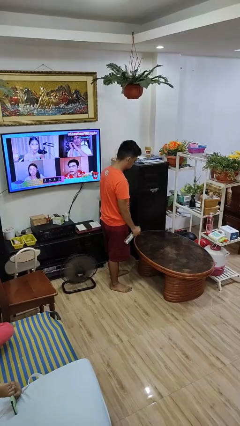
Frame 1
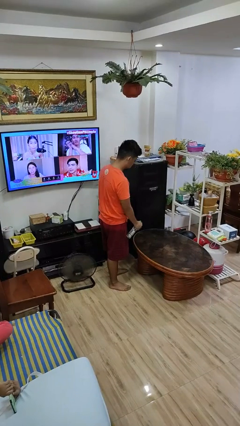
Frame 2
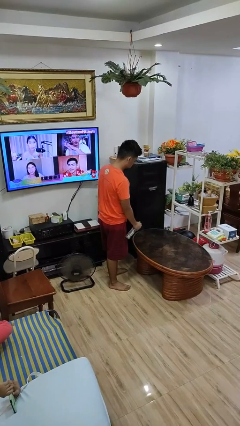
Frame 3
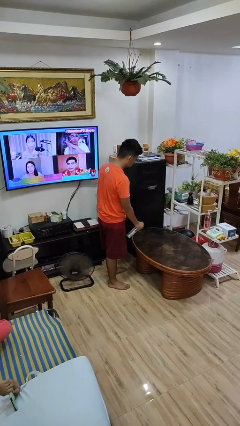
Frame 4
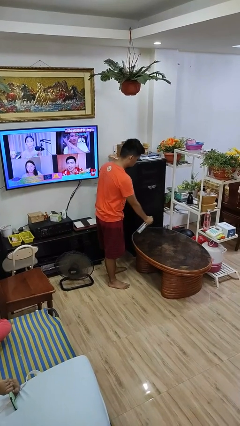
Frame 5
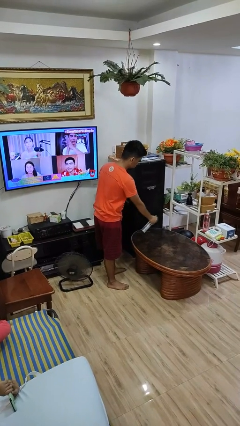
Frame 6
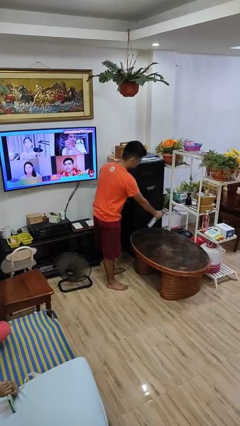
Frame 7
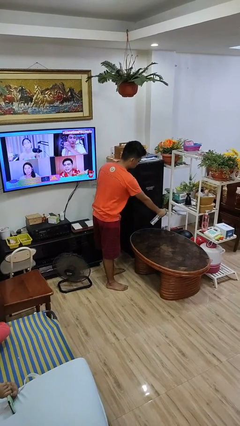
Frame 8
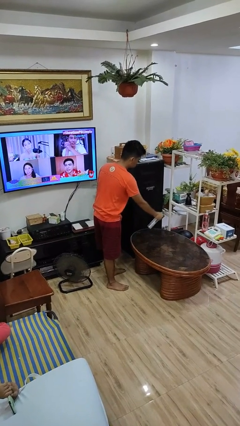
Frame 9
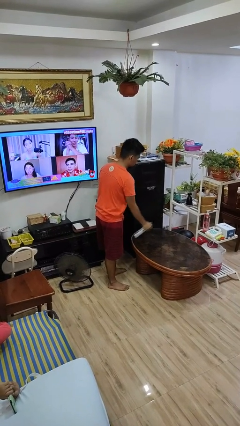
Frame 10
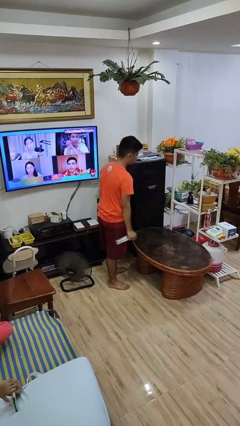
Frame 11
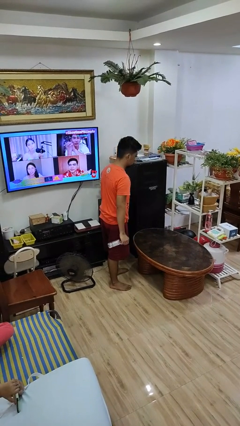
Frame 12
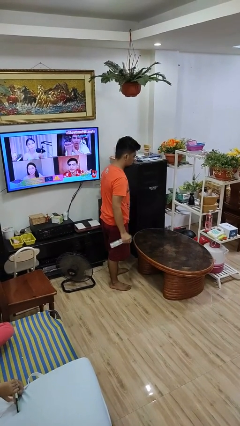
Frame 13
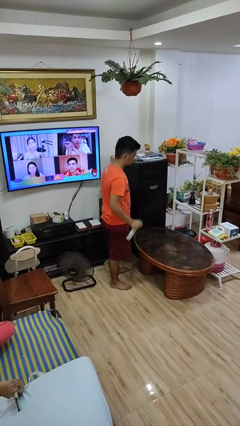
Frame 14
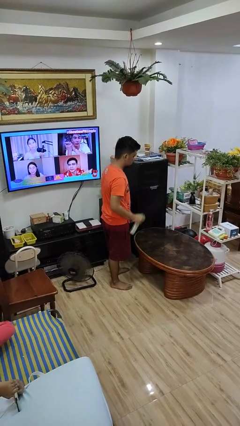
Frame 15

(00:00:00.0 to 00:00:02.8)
person sprays from bottle

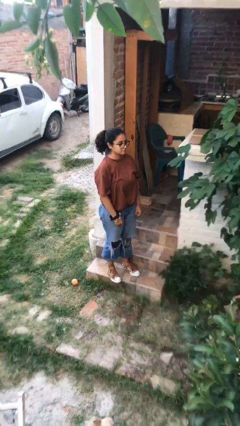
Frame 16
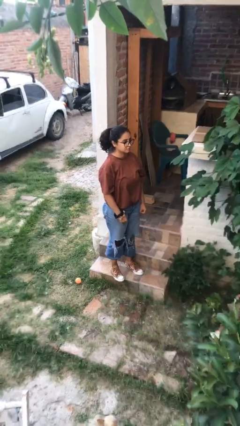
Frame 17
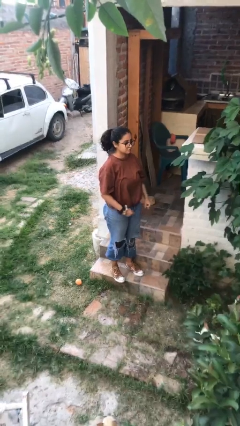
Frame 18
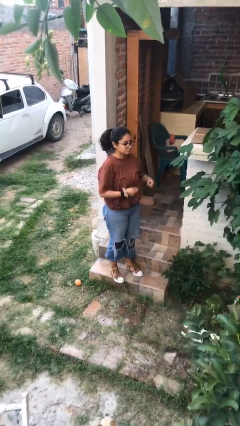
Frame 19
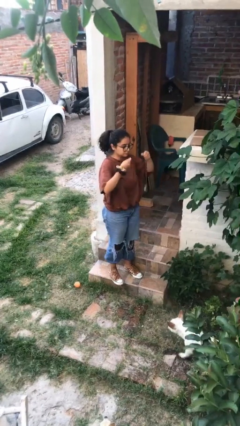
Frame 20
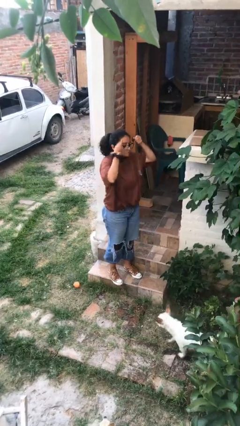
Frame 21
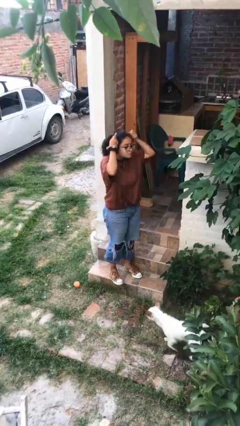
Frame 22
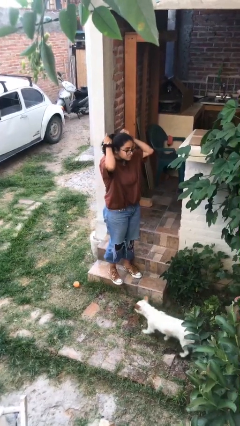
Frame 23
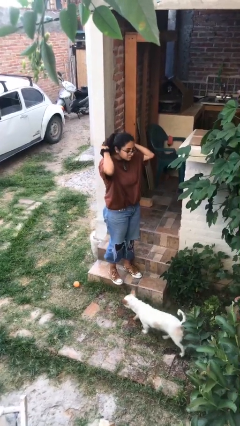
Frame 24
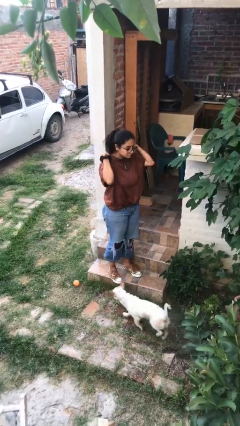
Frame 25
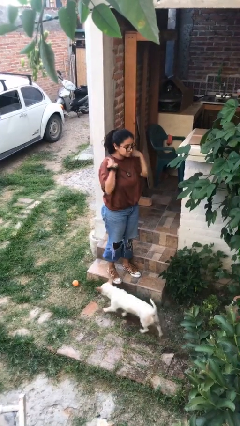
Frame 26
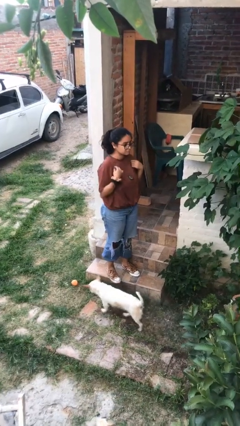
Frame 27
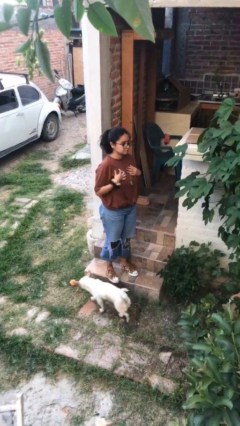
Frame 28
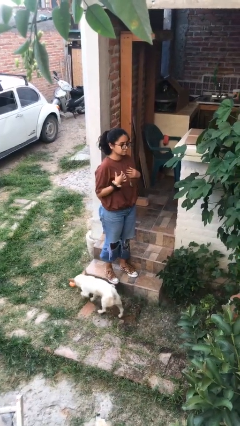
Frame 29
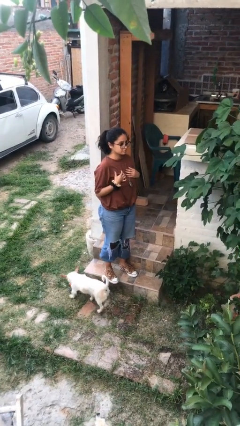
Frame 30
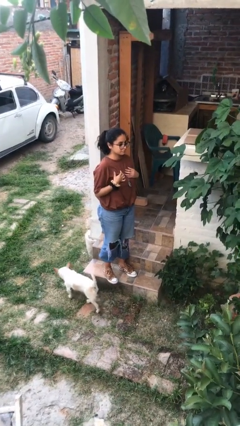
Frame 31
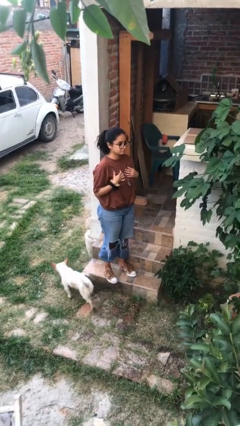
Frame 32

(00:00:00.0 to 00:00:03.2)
person puts on necklace

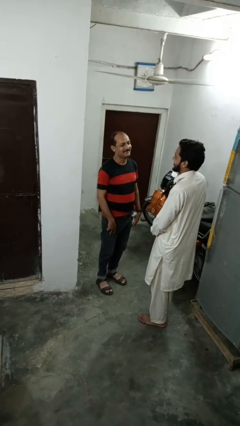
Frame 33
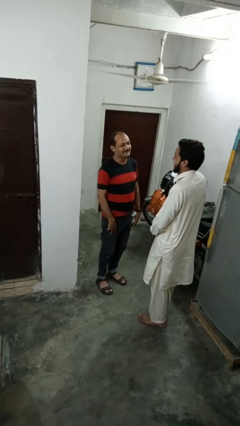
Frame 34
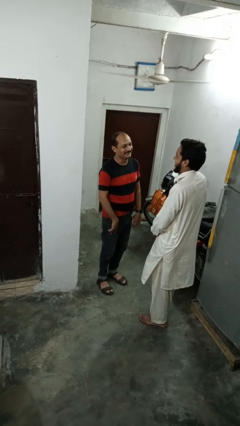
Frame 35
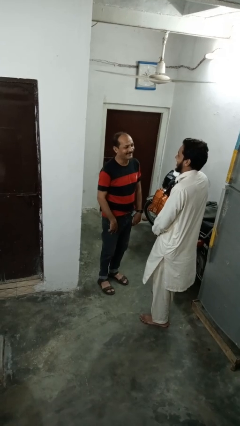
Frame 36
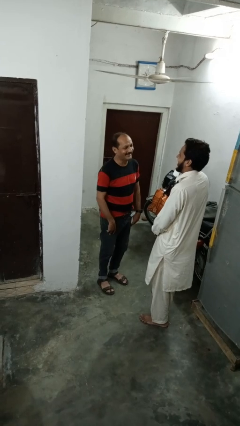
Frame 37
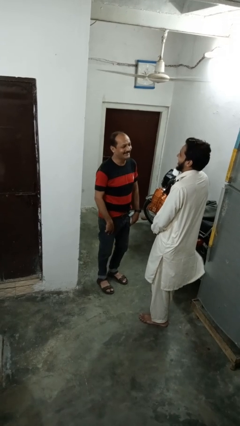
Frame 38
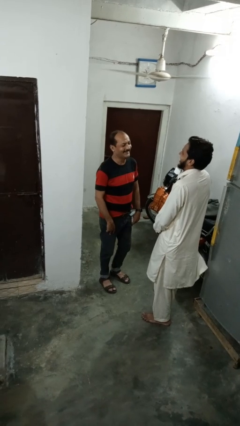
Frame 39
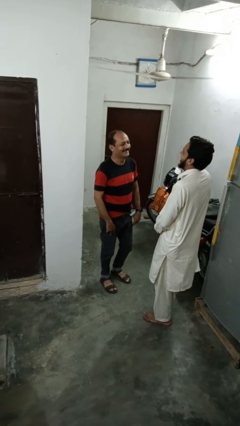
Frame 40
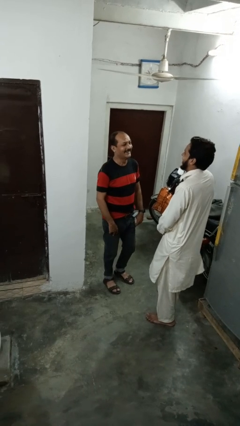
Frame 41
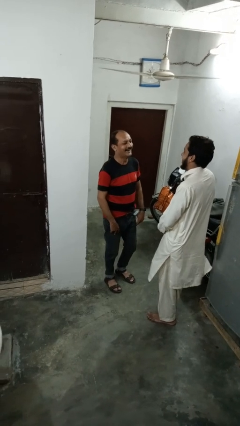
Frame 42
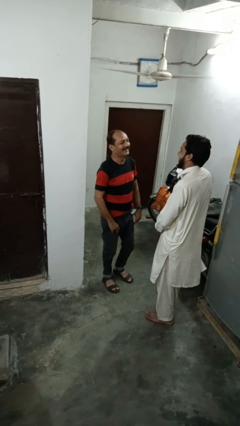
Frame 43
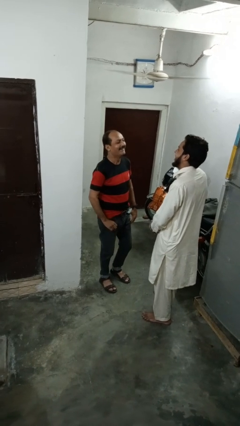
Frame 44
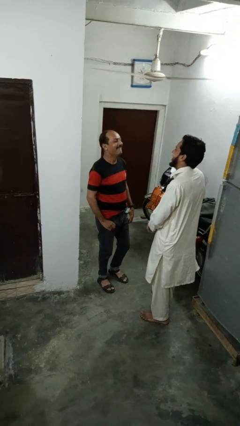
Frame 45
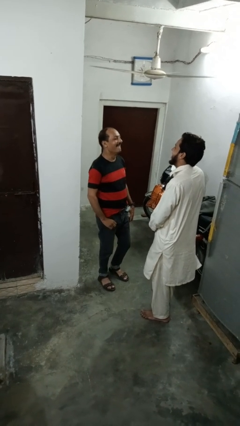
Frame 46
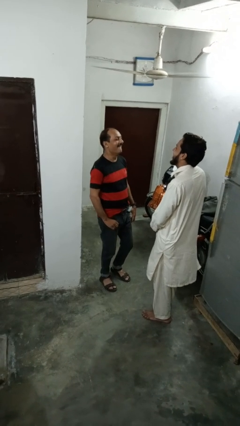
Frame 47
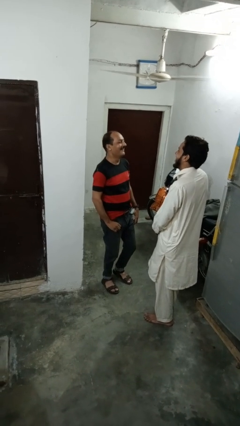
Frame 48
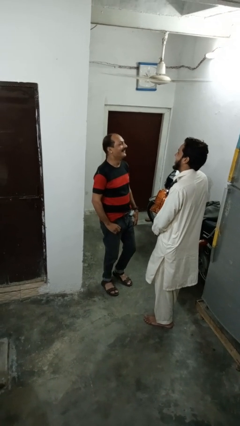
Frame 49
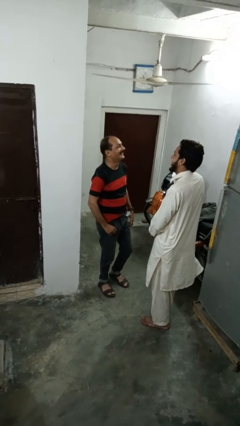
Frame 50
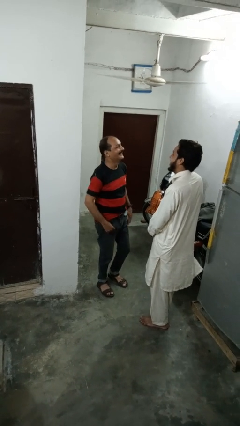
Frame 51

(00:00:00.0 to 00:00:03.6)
person laughs with person

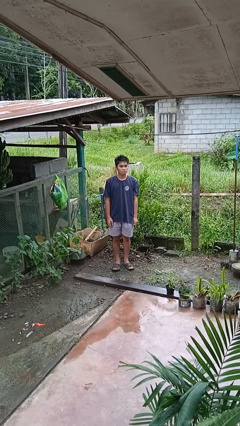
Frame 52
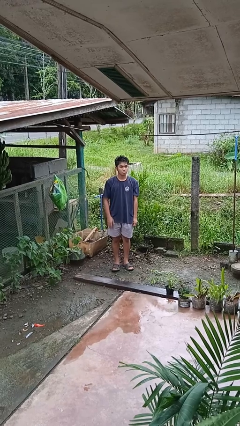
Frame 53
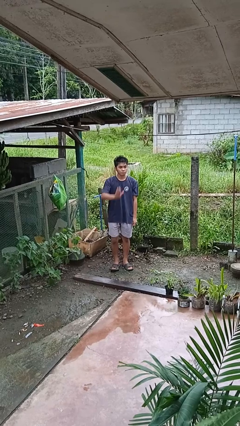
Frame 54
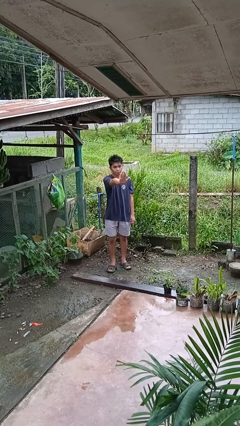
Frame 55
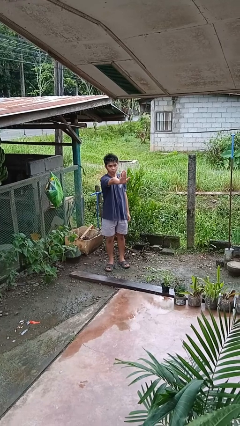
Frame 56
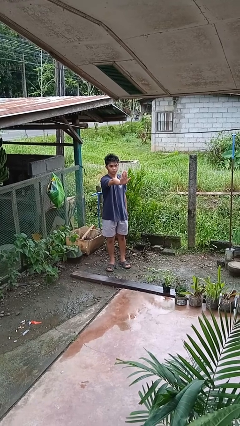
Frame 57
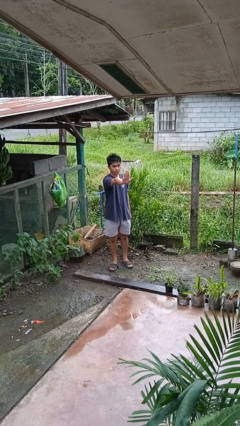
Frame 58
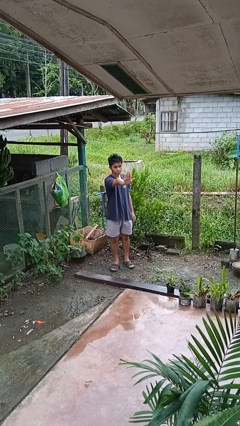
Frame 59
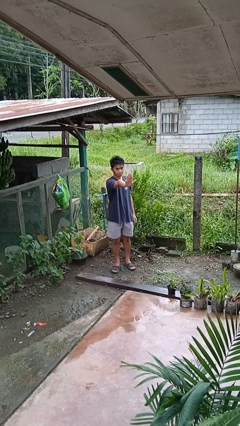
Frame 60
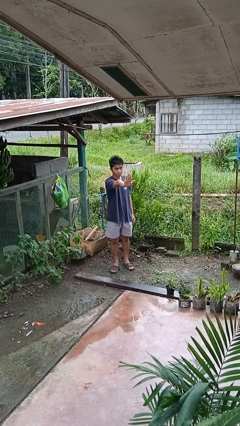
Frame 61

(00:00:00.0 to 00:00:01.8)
person gestures stop

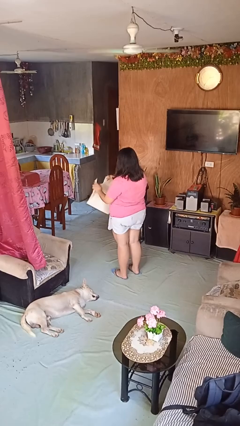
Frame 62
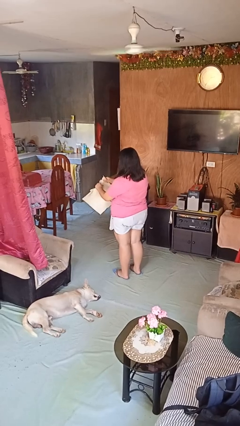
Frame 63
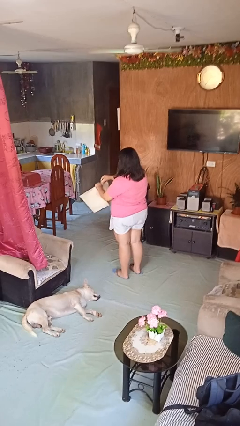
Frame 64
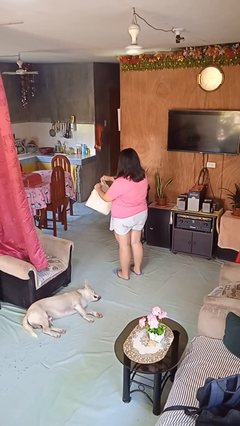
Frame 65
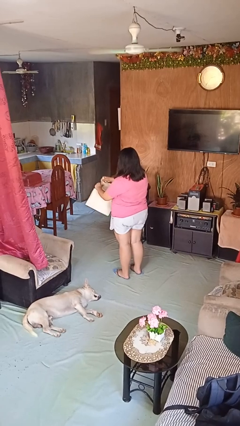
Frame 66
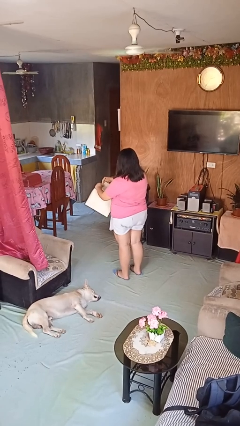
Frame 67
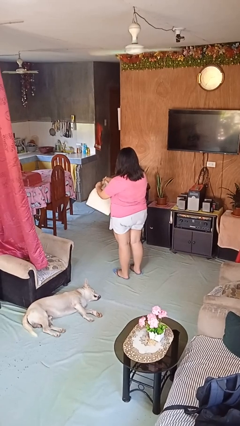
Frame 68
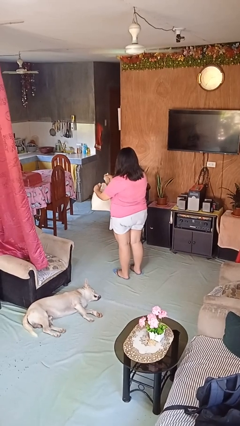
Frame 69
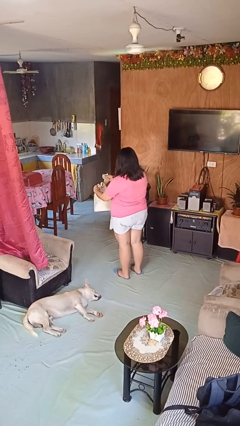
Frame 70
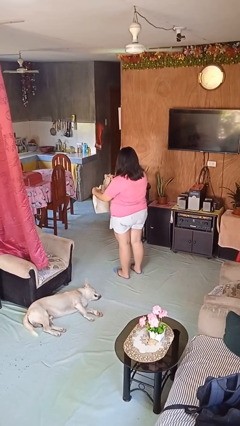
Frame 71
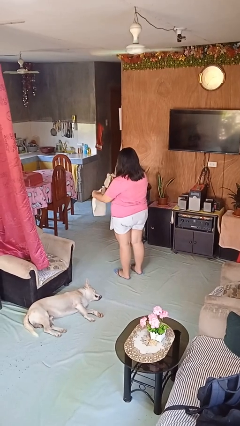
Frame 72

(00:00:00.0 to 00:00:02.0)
person tears paper

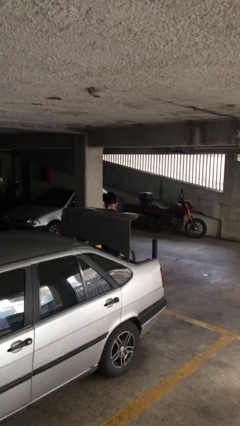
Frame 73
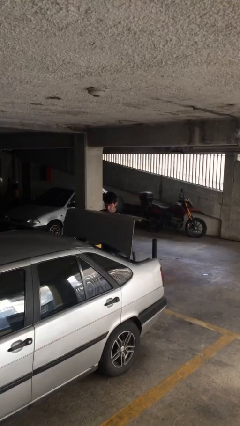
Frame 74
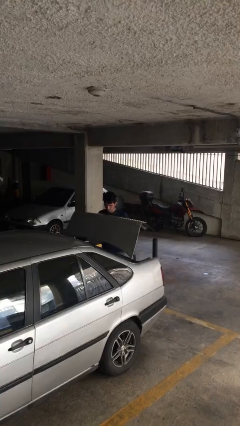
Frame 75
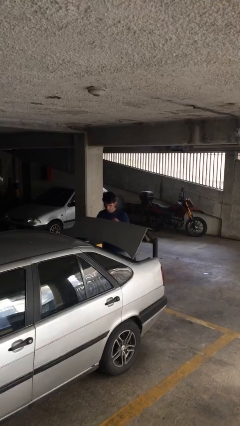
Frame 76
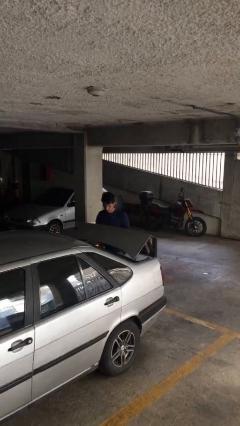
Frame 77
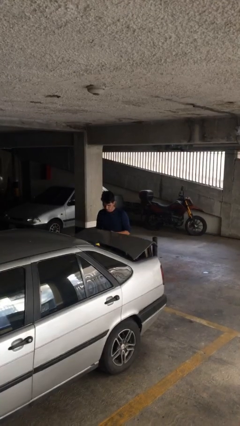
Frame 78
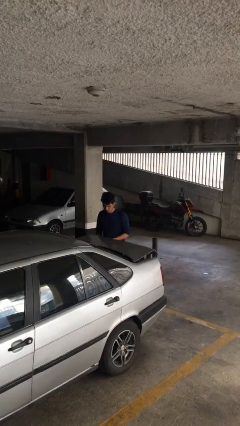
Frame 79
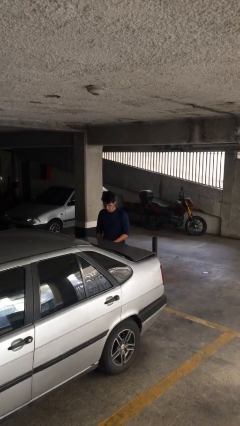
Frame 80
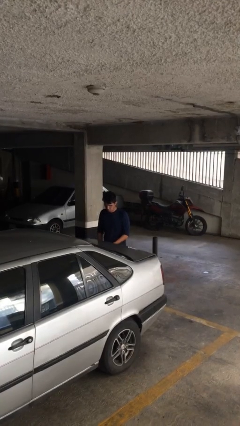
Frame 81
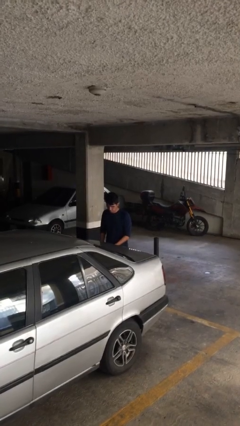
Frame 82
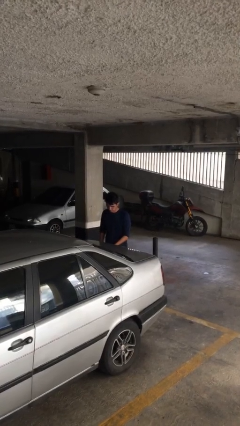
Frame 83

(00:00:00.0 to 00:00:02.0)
person closes car trunk

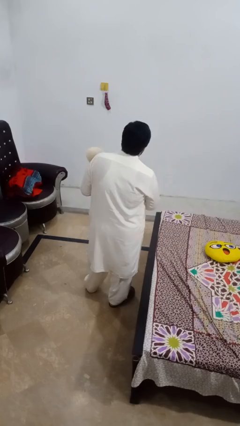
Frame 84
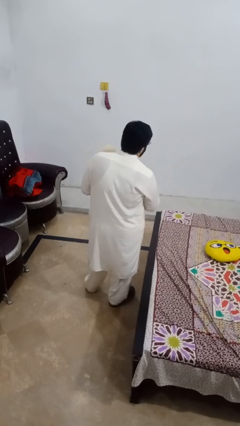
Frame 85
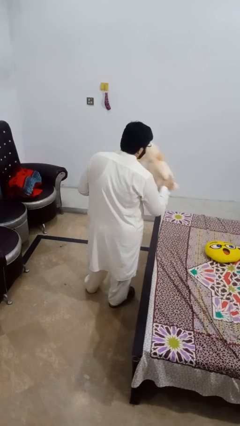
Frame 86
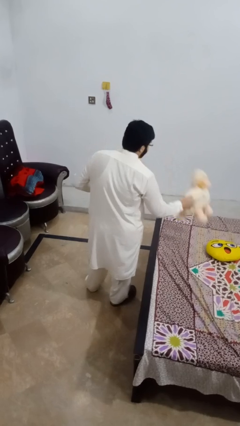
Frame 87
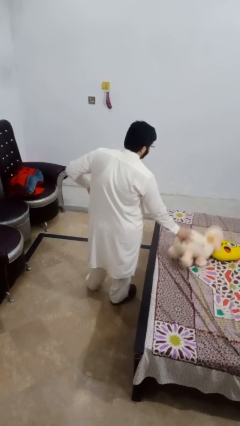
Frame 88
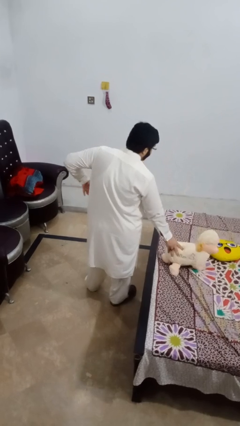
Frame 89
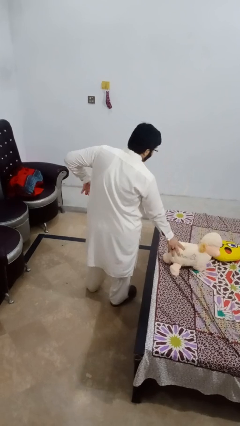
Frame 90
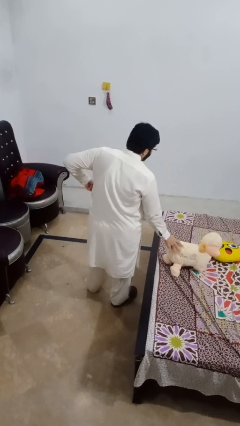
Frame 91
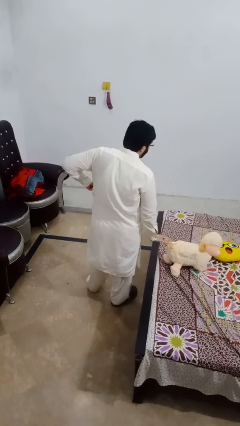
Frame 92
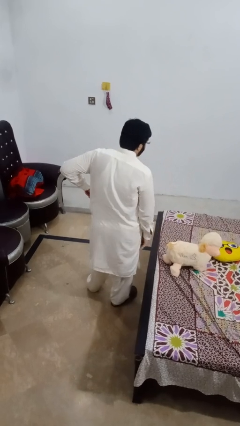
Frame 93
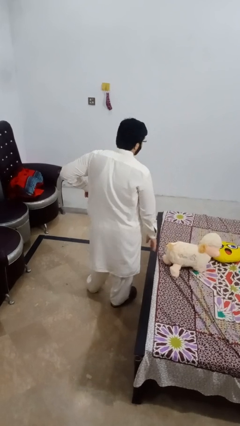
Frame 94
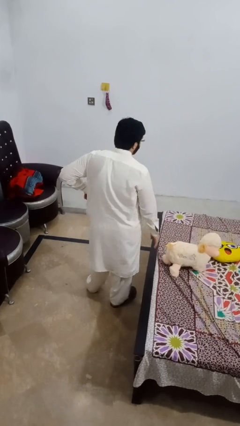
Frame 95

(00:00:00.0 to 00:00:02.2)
person puts down object on bed
